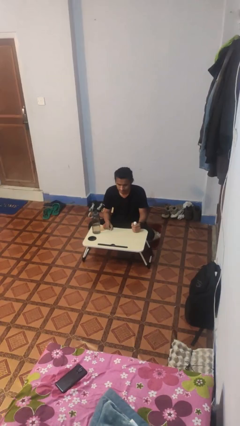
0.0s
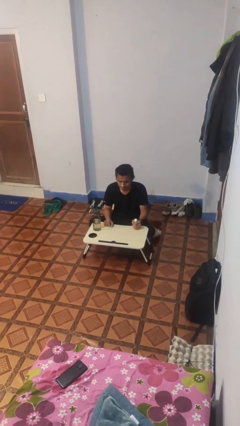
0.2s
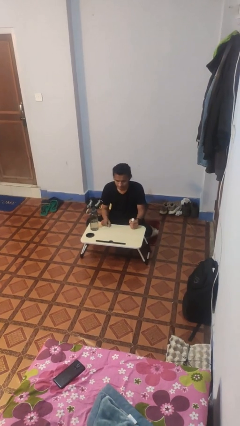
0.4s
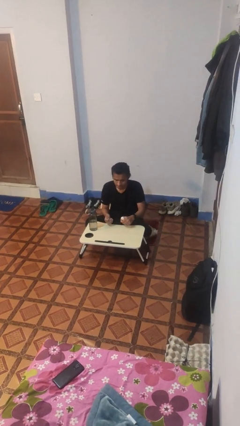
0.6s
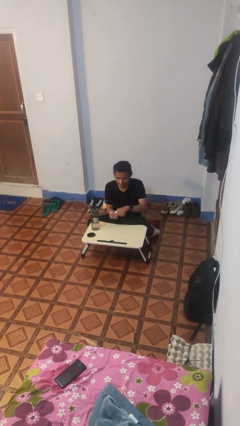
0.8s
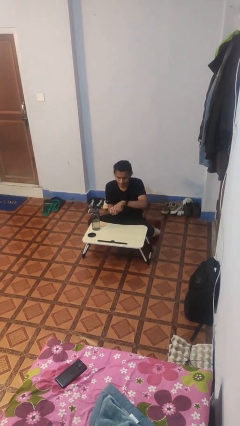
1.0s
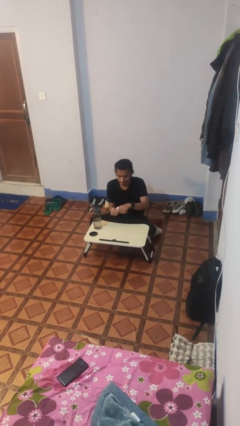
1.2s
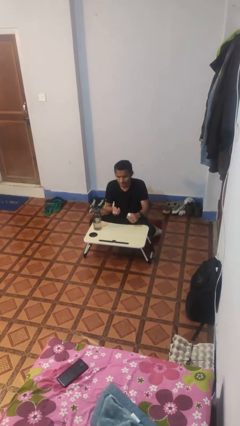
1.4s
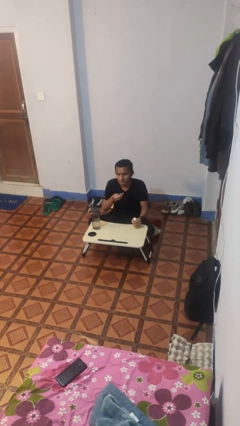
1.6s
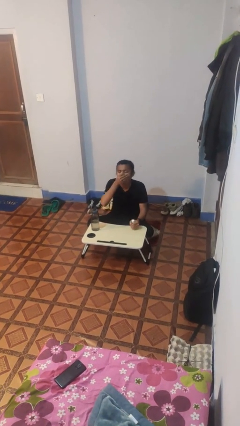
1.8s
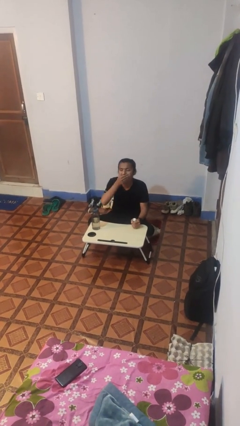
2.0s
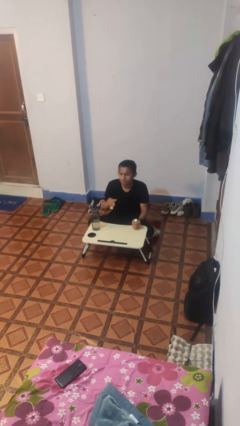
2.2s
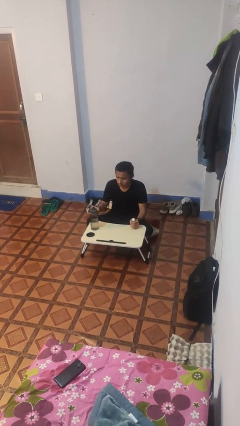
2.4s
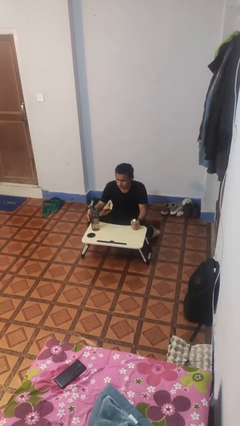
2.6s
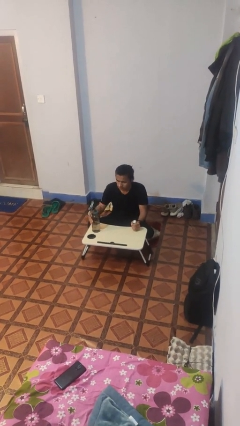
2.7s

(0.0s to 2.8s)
person takes medicine pills

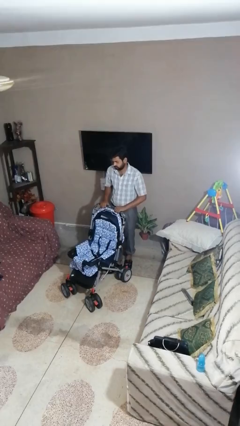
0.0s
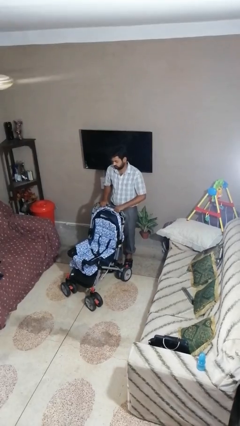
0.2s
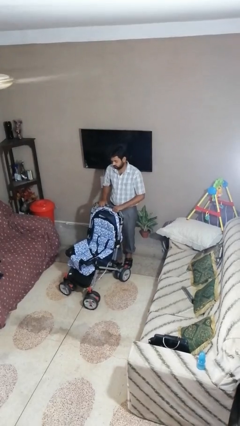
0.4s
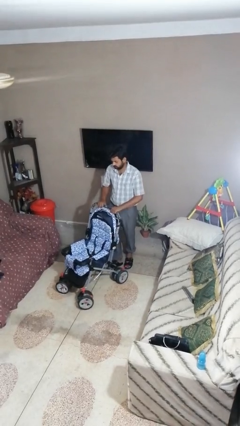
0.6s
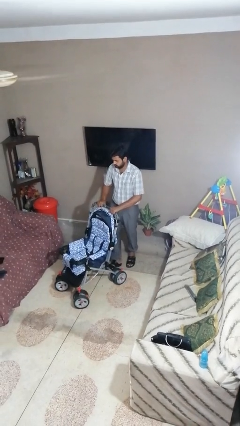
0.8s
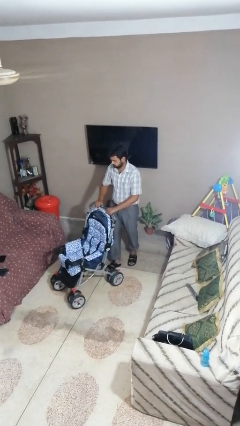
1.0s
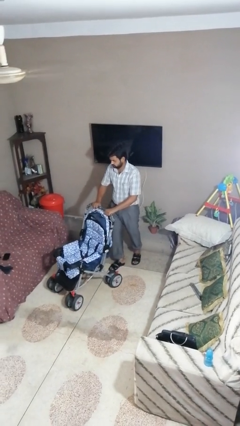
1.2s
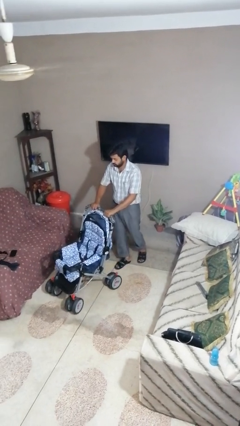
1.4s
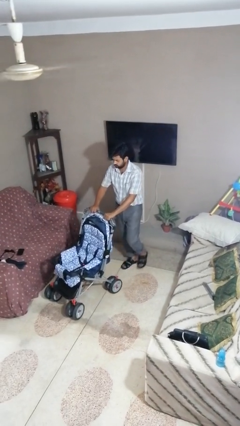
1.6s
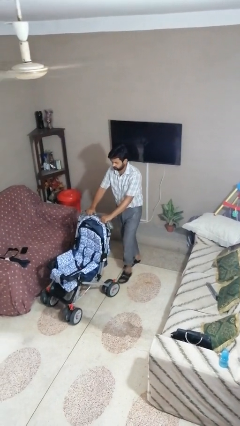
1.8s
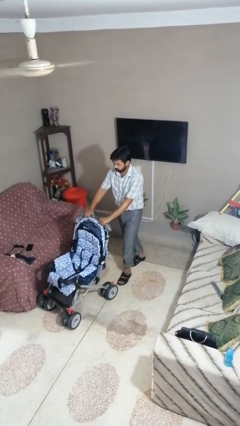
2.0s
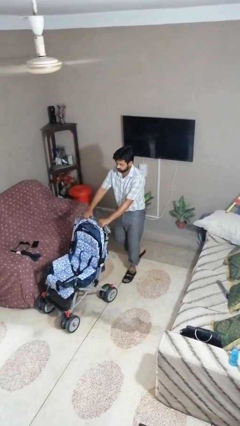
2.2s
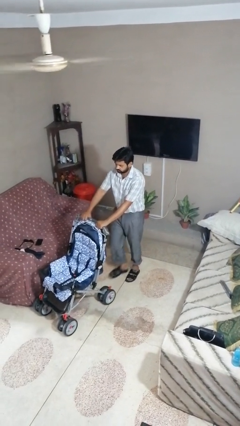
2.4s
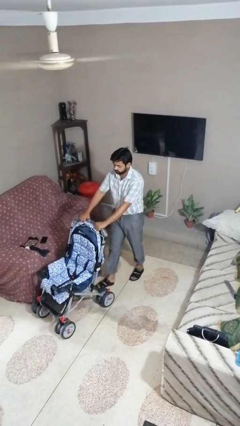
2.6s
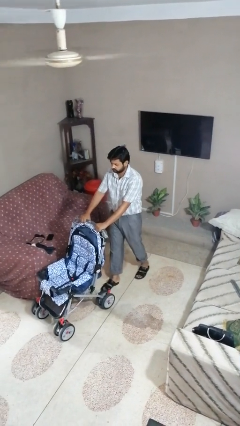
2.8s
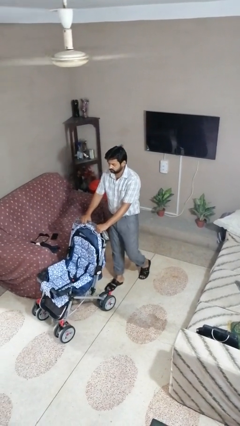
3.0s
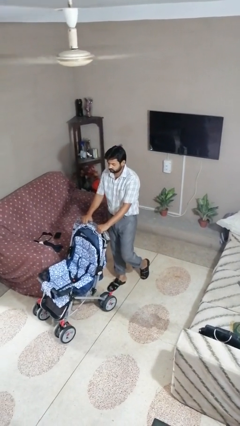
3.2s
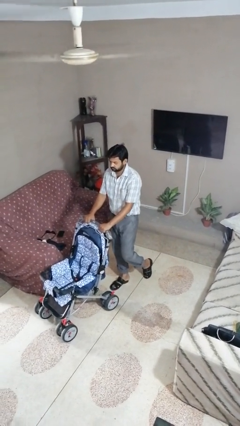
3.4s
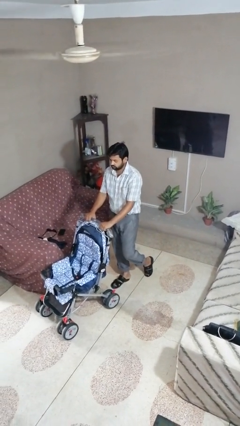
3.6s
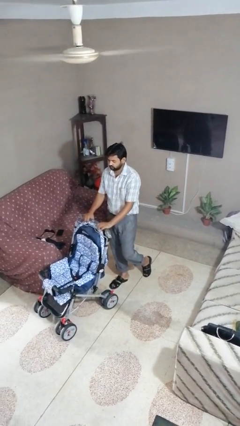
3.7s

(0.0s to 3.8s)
person pushes wheeled cart

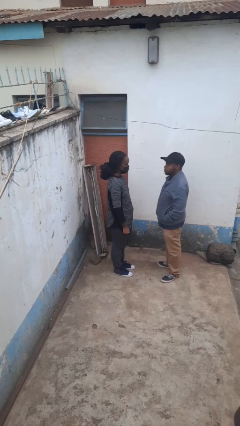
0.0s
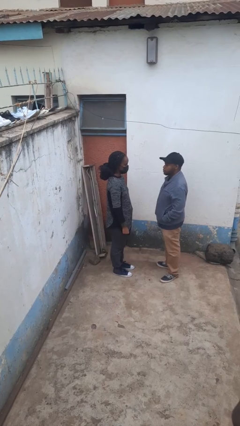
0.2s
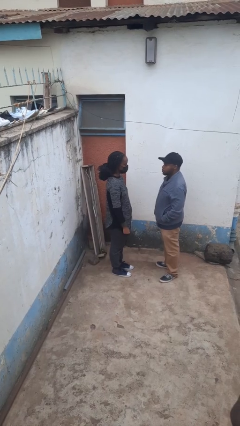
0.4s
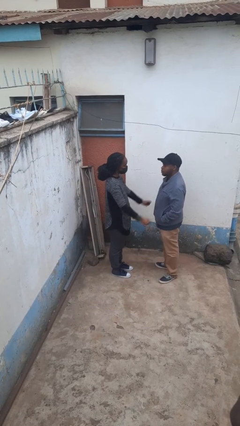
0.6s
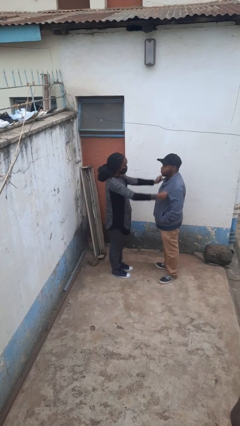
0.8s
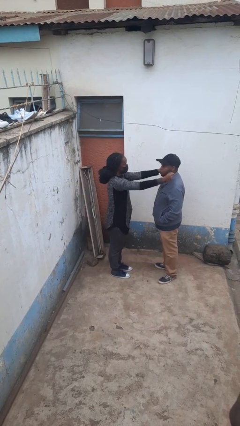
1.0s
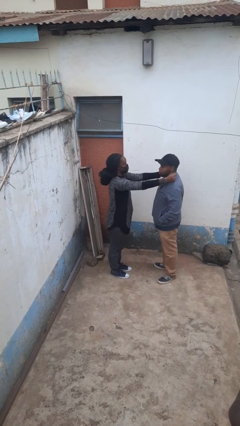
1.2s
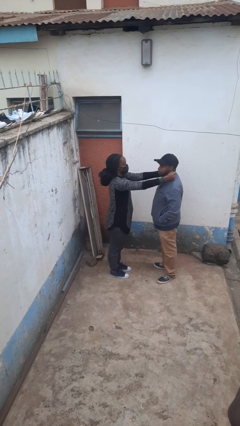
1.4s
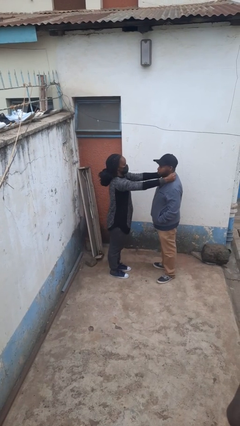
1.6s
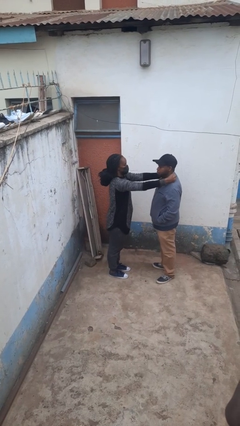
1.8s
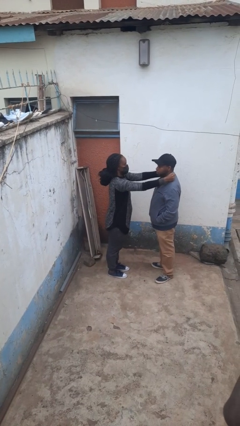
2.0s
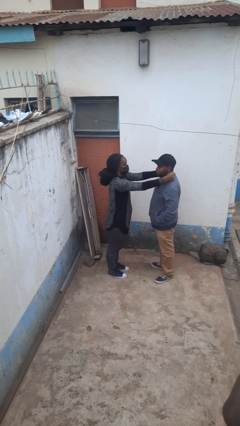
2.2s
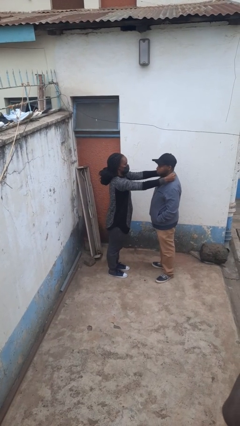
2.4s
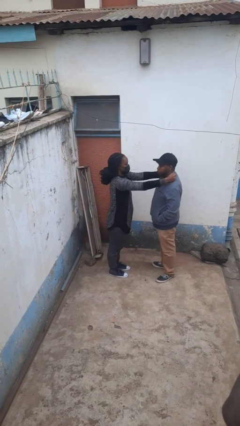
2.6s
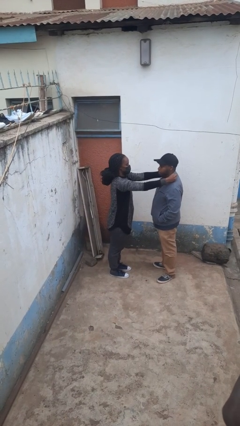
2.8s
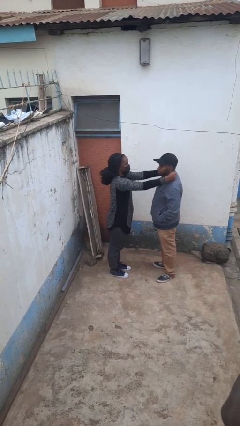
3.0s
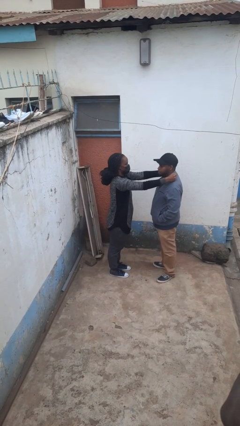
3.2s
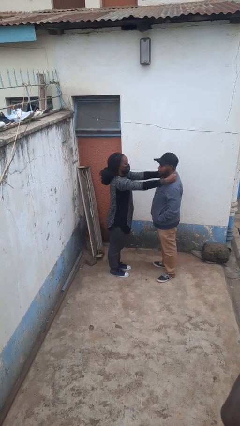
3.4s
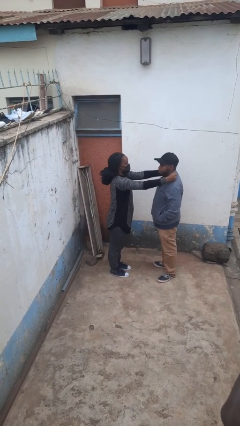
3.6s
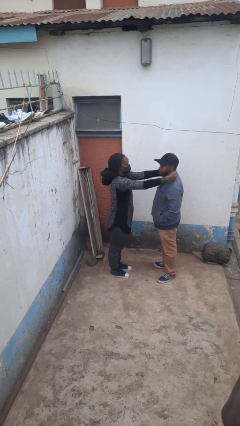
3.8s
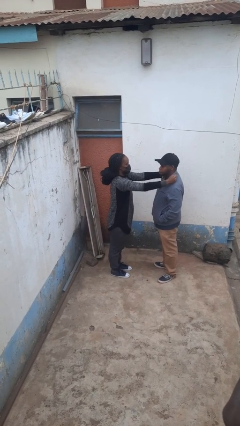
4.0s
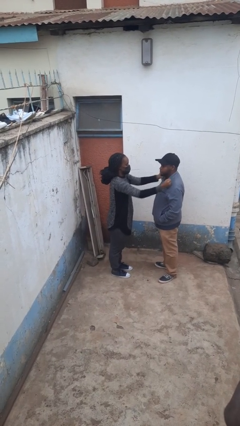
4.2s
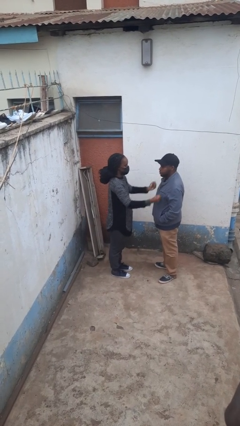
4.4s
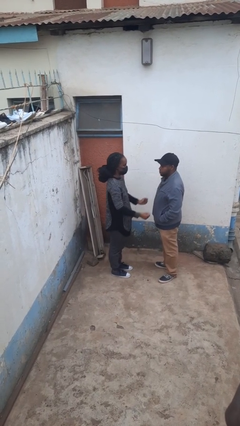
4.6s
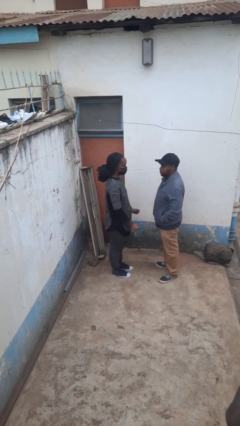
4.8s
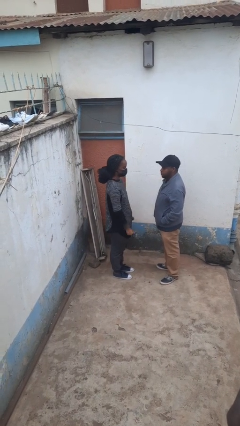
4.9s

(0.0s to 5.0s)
person pounds shoulders of person

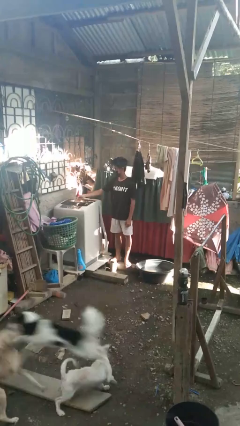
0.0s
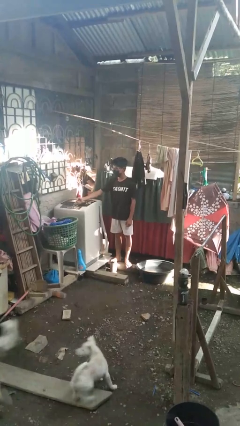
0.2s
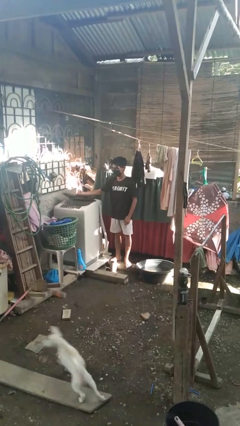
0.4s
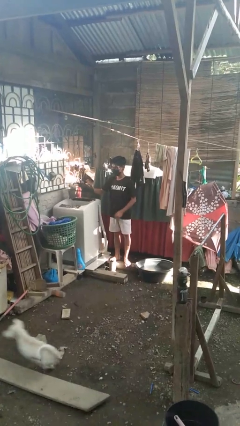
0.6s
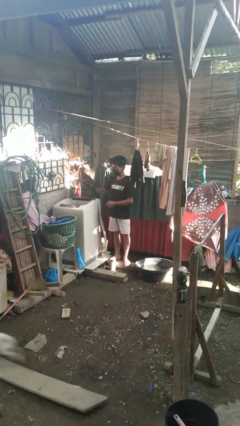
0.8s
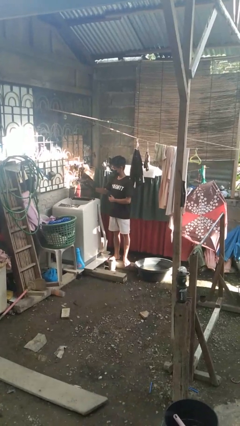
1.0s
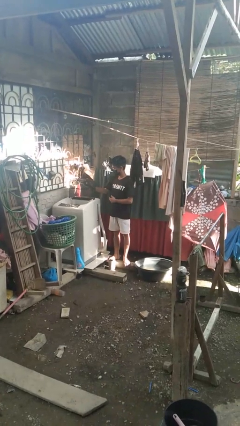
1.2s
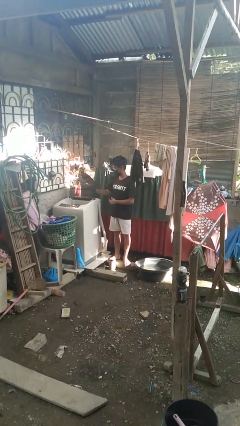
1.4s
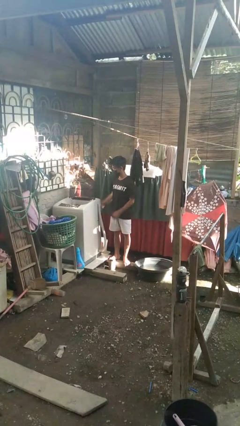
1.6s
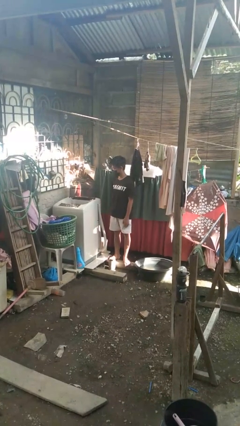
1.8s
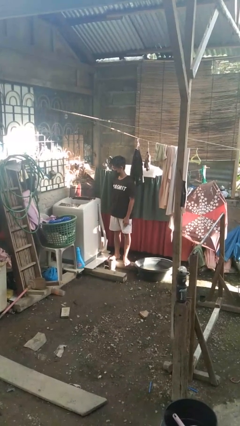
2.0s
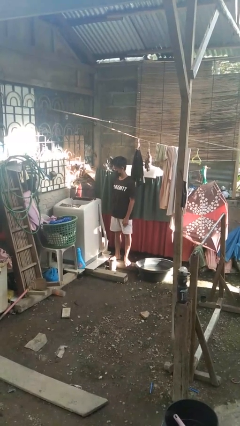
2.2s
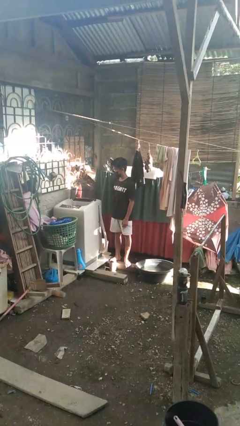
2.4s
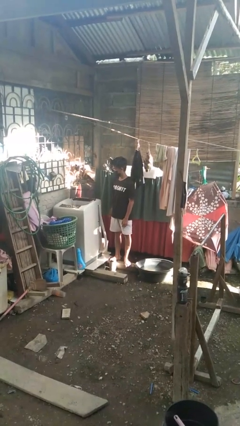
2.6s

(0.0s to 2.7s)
person opens clothes washer

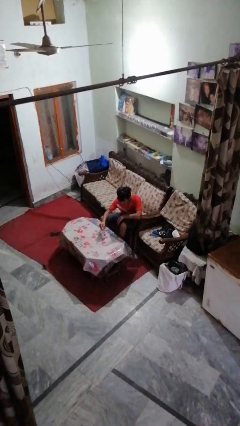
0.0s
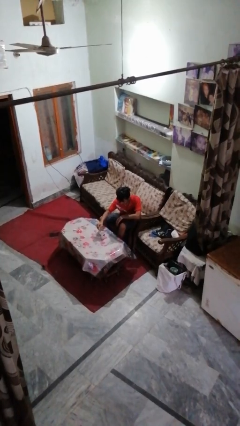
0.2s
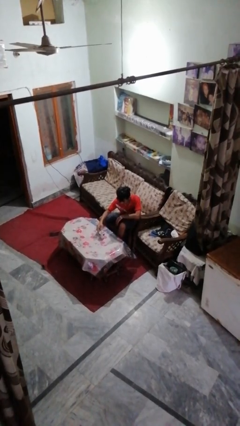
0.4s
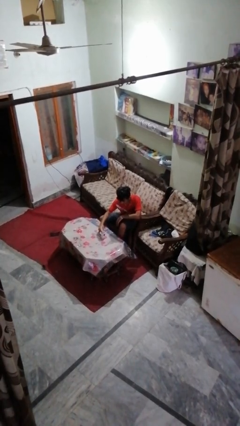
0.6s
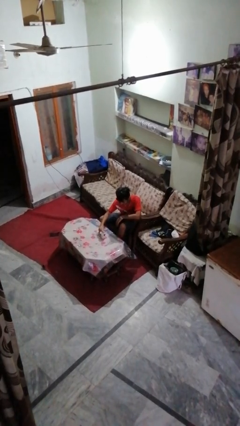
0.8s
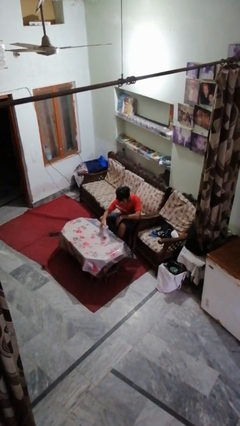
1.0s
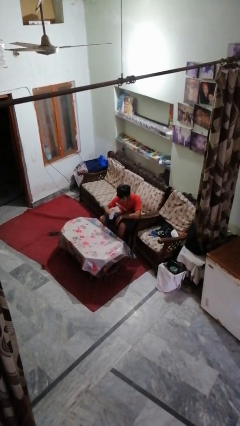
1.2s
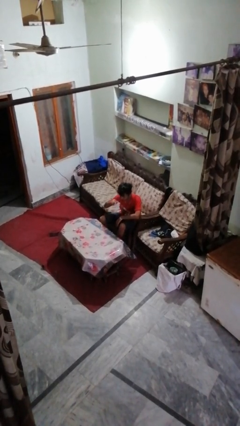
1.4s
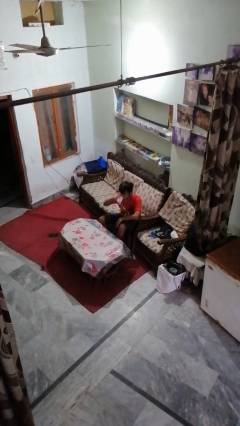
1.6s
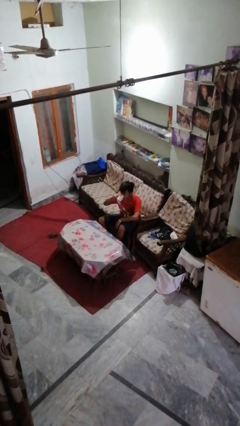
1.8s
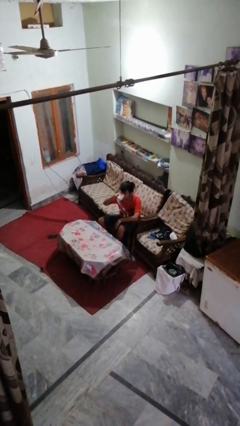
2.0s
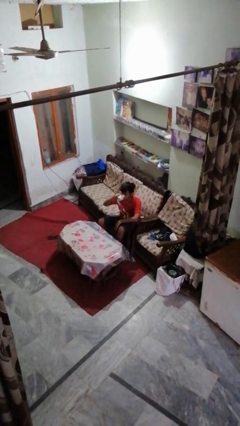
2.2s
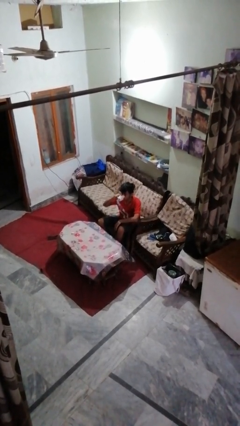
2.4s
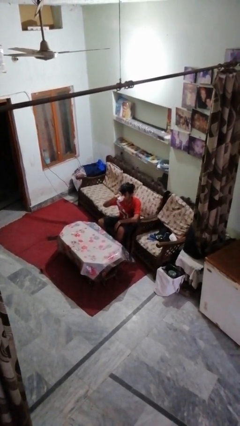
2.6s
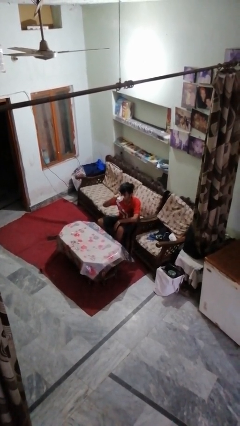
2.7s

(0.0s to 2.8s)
person drinks from mug

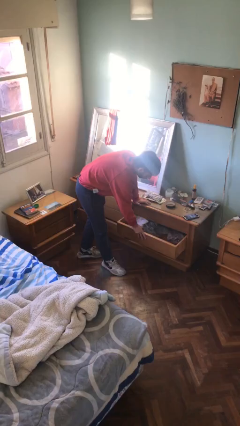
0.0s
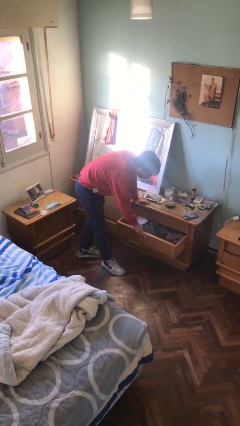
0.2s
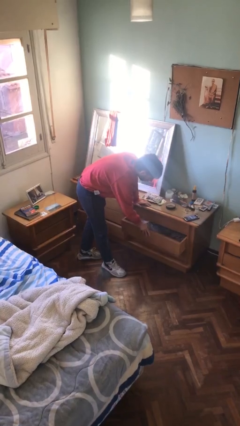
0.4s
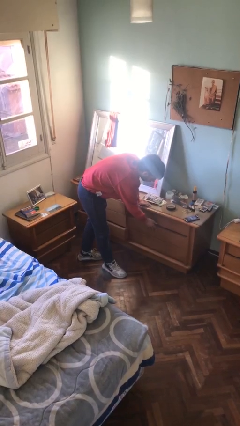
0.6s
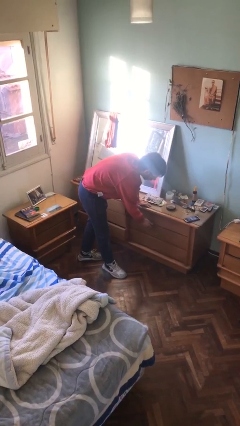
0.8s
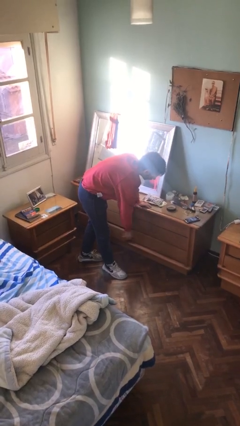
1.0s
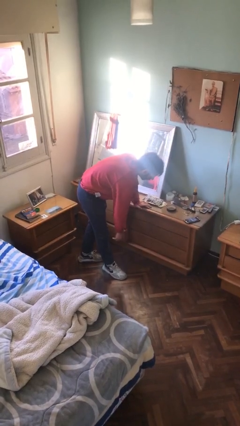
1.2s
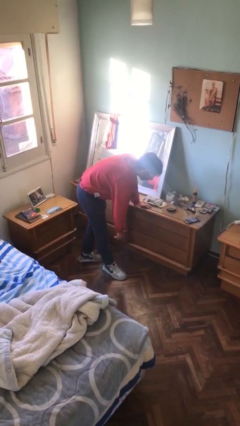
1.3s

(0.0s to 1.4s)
person closes dresser drawer
